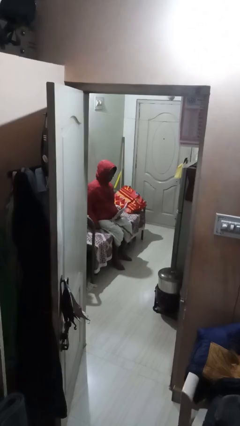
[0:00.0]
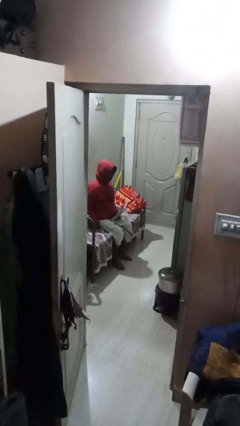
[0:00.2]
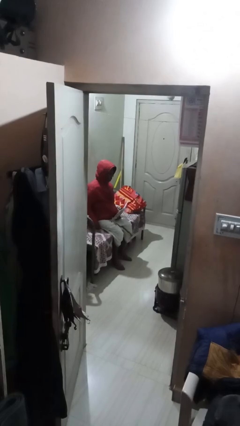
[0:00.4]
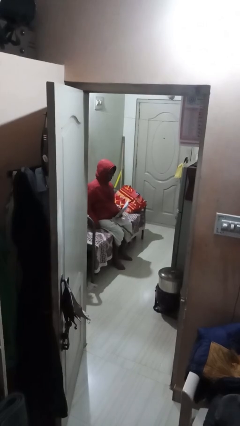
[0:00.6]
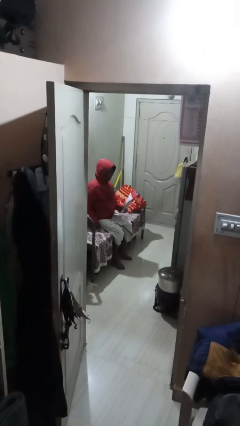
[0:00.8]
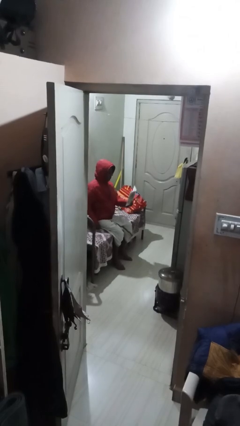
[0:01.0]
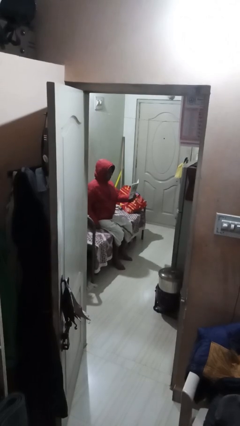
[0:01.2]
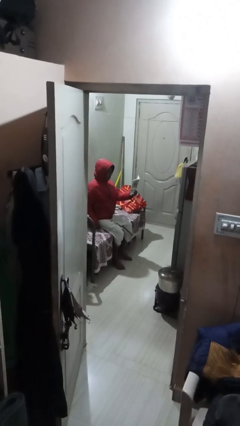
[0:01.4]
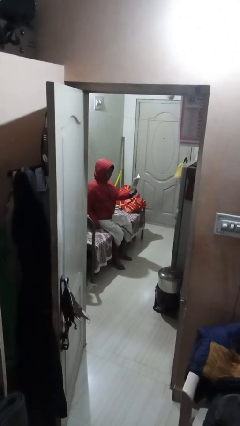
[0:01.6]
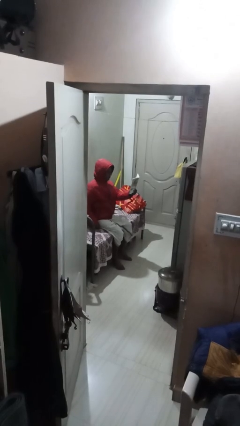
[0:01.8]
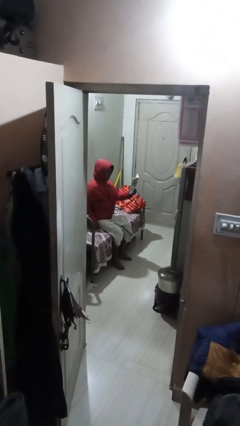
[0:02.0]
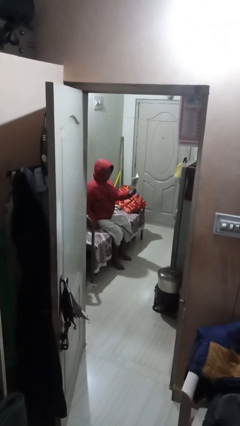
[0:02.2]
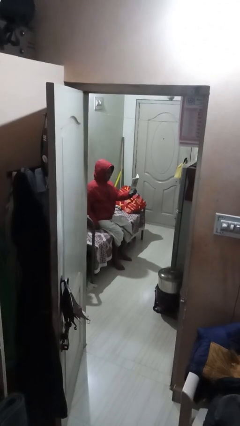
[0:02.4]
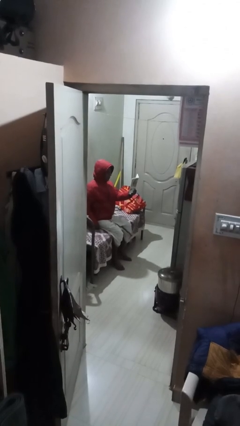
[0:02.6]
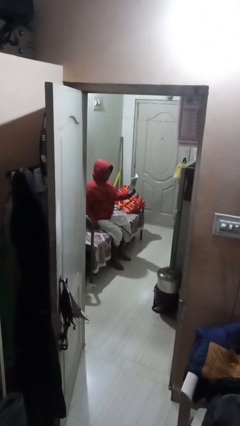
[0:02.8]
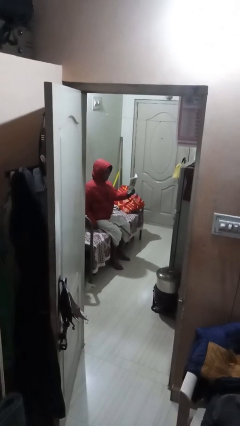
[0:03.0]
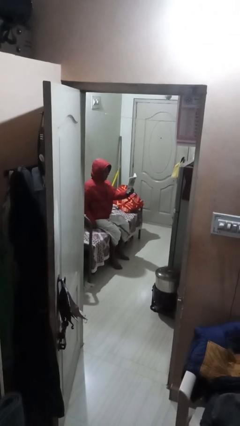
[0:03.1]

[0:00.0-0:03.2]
person reads document

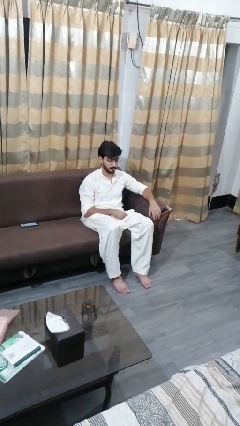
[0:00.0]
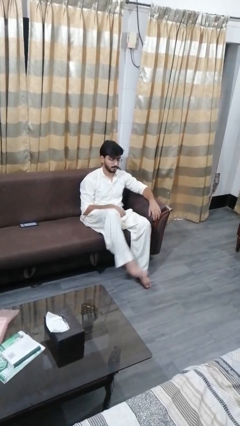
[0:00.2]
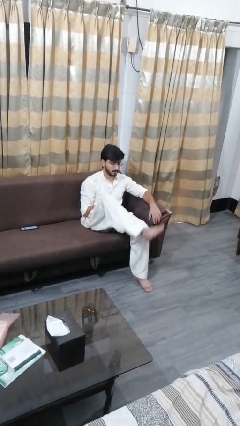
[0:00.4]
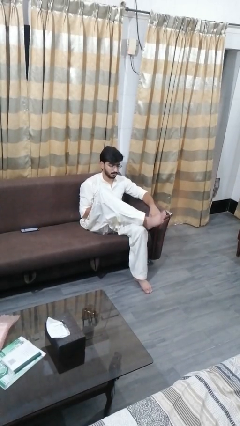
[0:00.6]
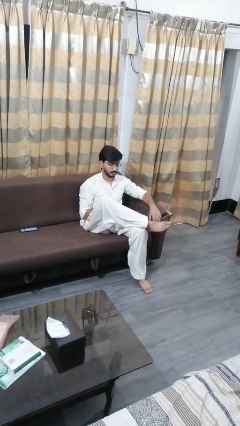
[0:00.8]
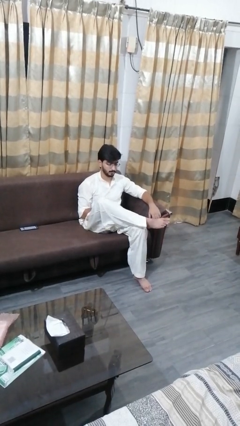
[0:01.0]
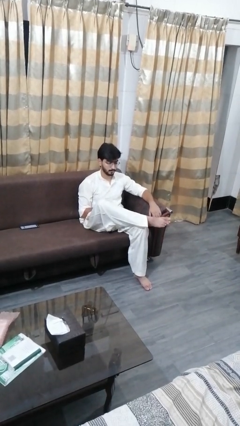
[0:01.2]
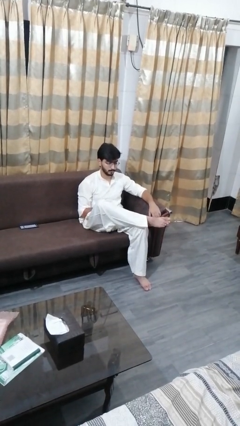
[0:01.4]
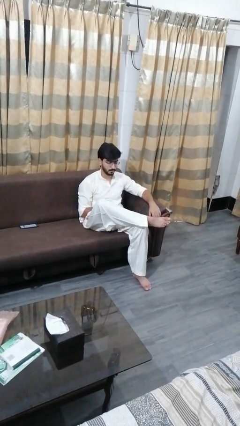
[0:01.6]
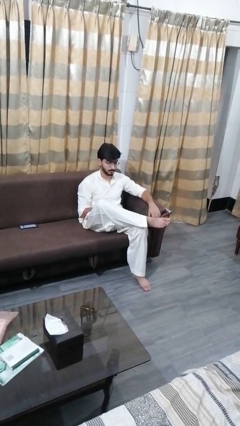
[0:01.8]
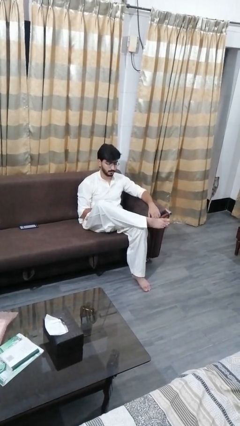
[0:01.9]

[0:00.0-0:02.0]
person crosses legs

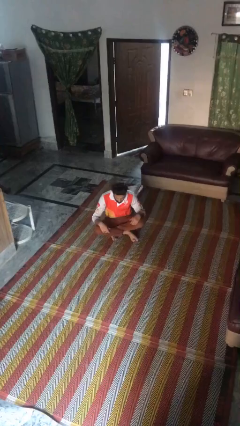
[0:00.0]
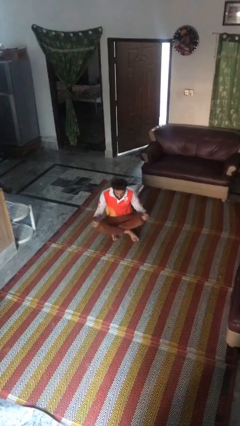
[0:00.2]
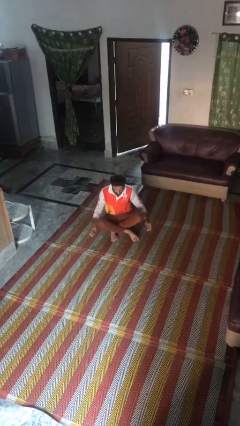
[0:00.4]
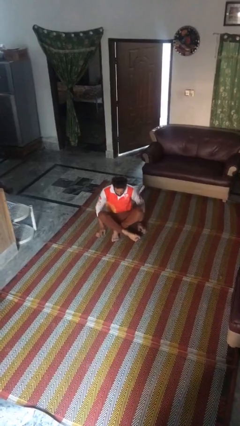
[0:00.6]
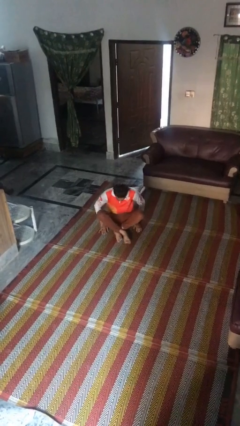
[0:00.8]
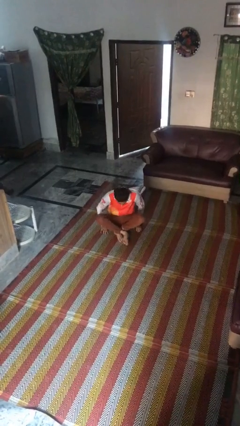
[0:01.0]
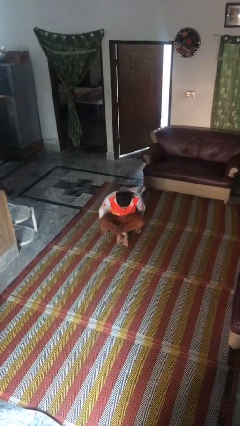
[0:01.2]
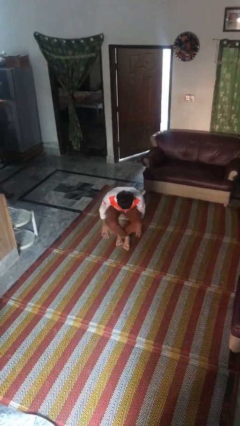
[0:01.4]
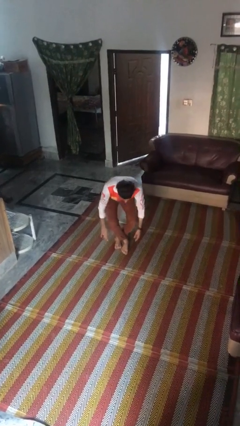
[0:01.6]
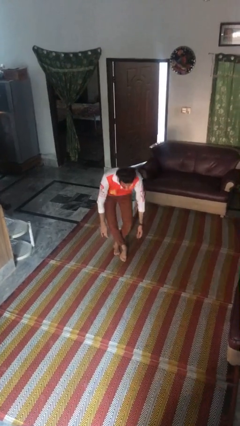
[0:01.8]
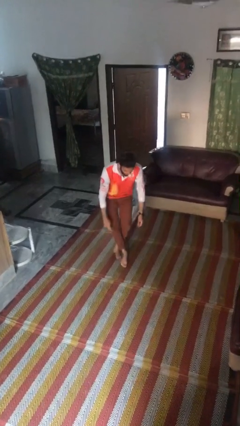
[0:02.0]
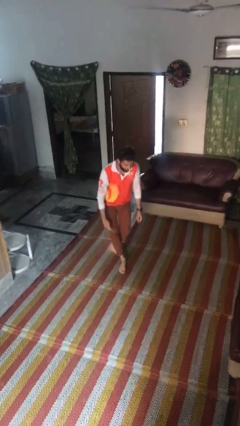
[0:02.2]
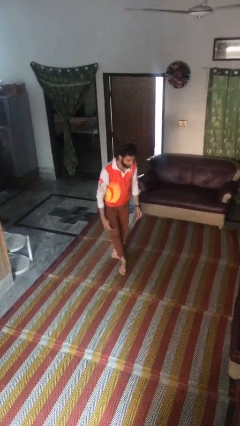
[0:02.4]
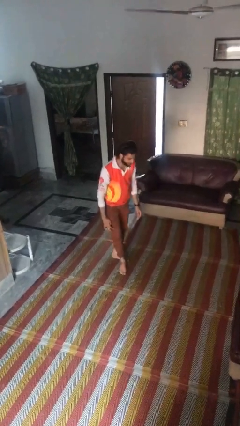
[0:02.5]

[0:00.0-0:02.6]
person stands up from floor

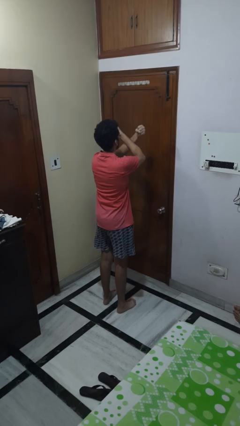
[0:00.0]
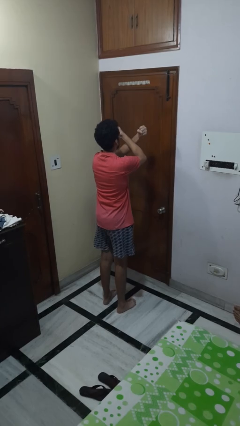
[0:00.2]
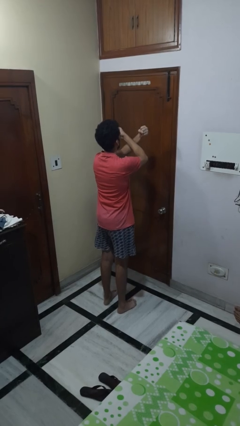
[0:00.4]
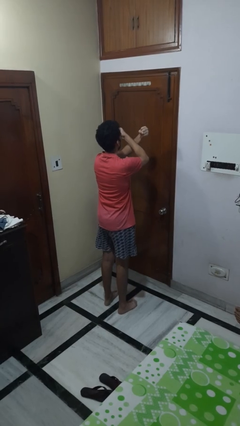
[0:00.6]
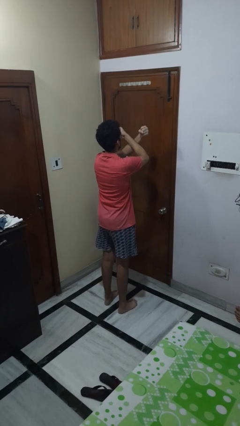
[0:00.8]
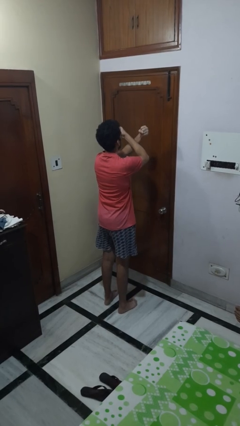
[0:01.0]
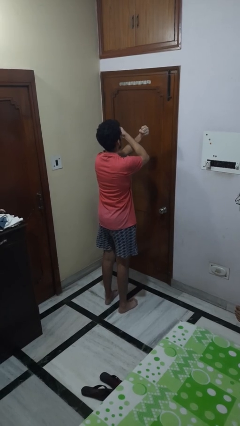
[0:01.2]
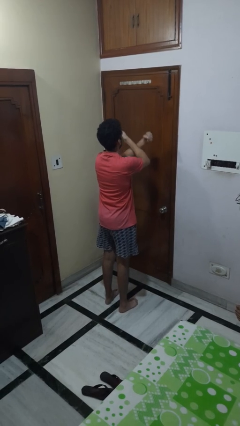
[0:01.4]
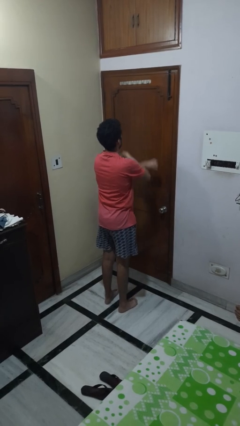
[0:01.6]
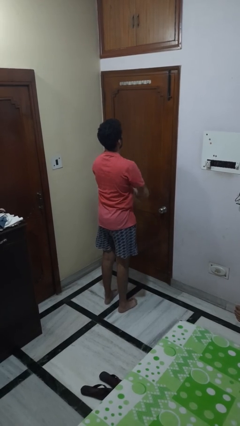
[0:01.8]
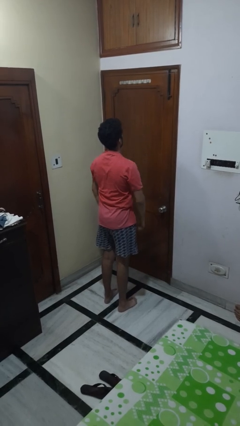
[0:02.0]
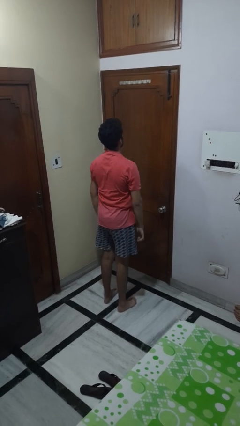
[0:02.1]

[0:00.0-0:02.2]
person gestures arms x

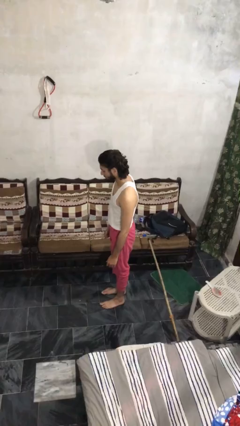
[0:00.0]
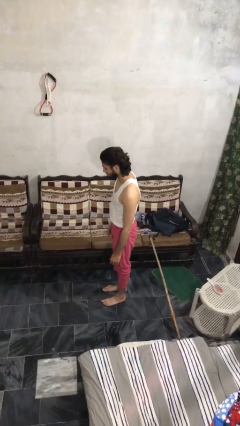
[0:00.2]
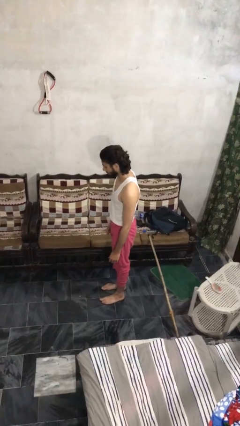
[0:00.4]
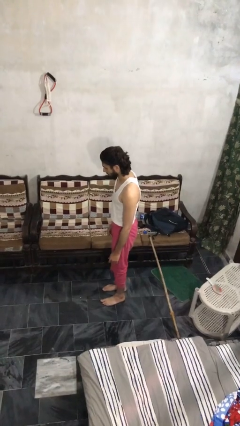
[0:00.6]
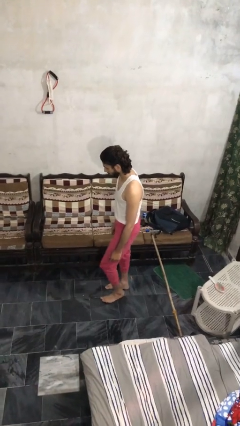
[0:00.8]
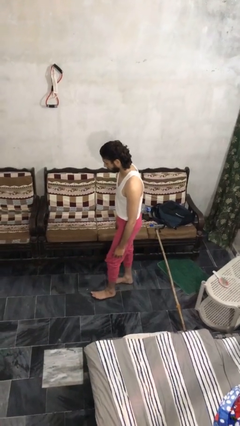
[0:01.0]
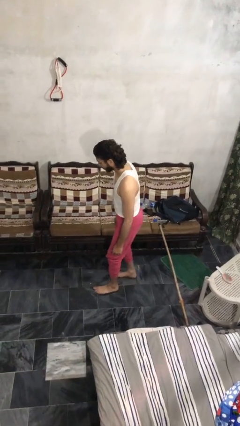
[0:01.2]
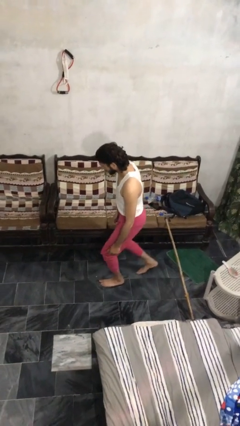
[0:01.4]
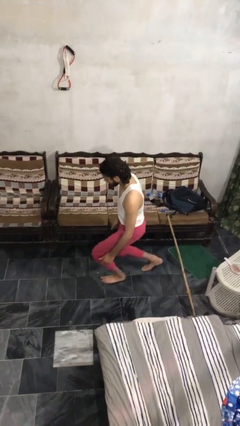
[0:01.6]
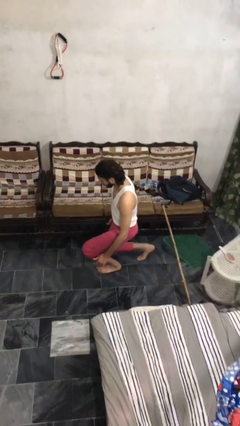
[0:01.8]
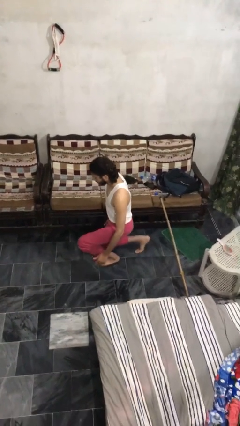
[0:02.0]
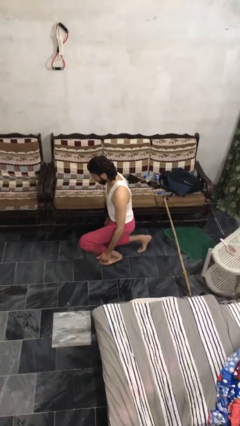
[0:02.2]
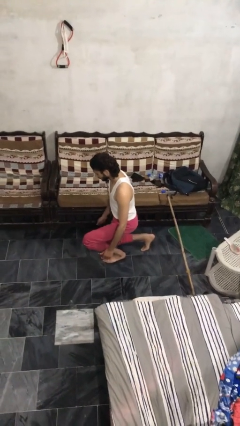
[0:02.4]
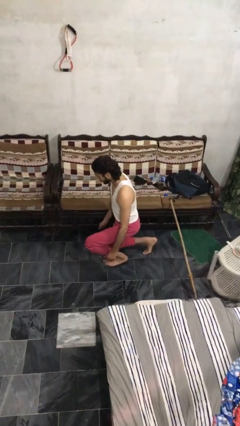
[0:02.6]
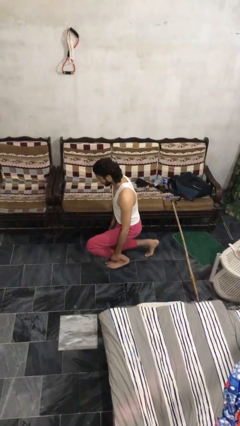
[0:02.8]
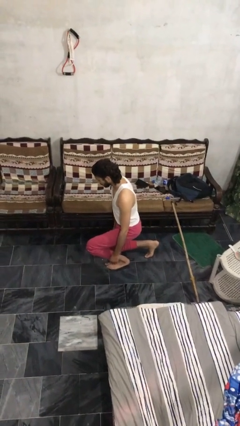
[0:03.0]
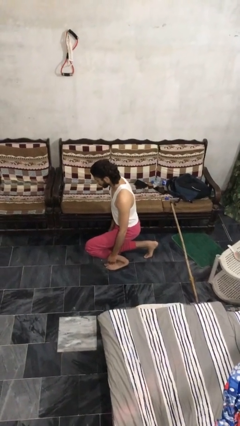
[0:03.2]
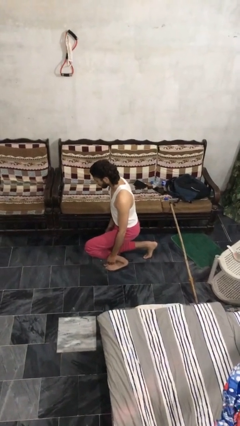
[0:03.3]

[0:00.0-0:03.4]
person kneels

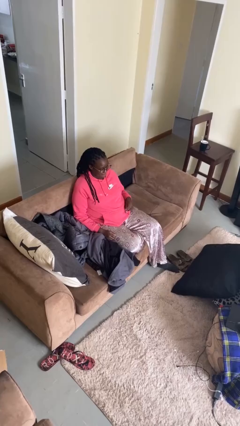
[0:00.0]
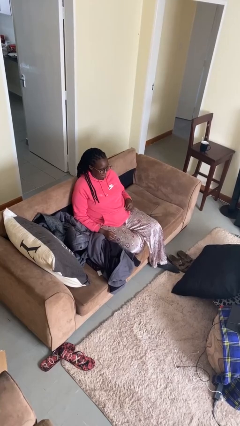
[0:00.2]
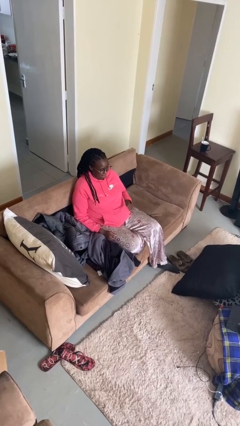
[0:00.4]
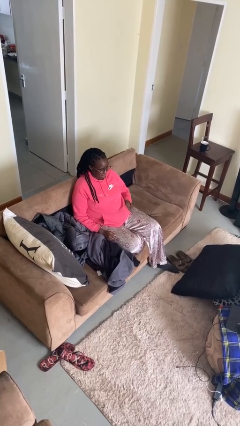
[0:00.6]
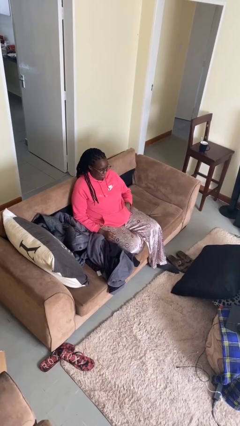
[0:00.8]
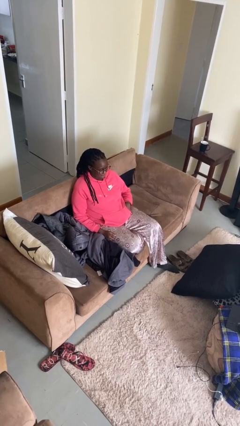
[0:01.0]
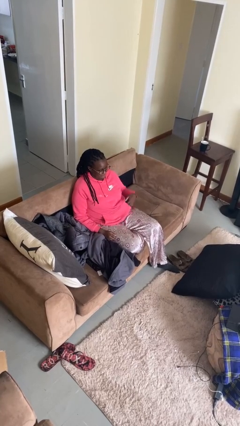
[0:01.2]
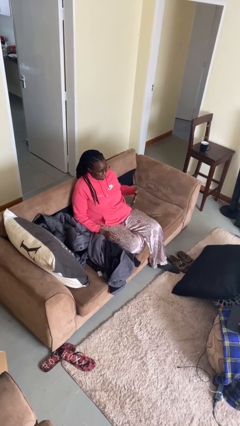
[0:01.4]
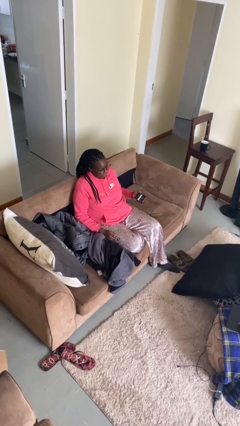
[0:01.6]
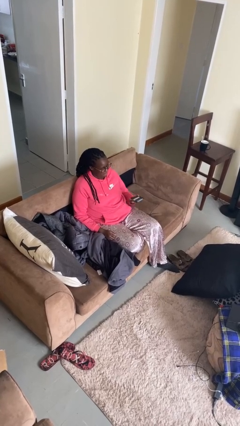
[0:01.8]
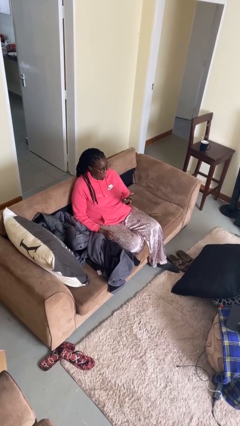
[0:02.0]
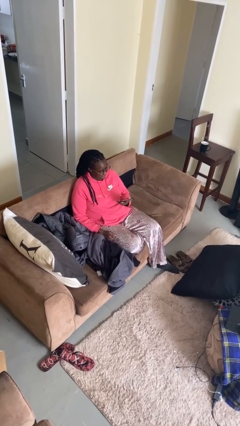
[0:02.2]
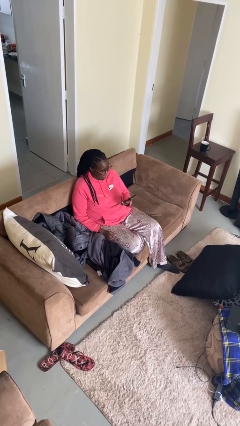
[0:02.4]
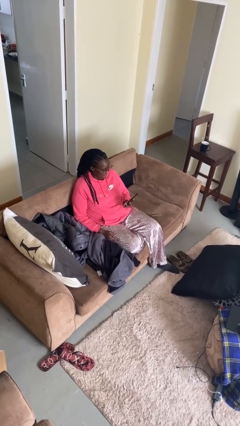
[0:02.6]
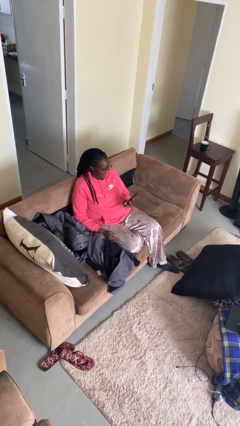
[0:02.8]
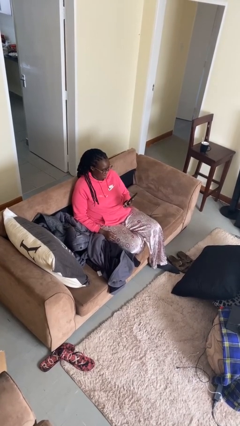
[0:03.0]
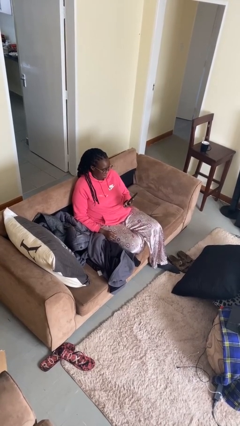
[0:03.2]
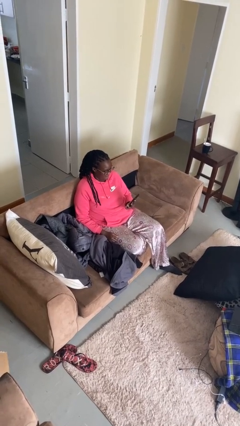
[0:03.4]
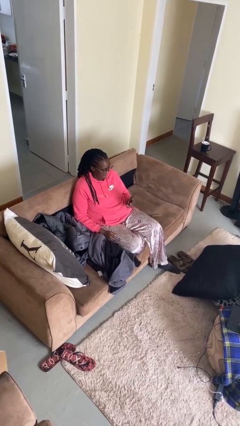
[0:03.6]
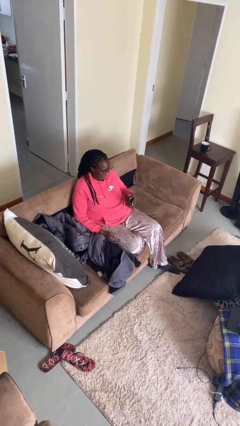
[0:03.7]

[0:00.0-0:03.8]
person takes phone from pocket

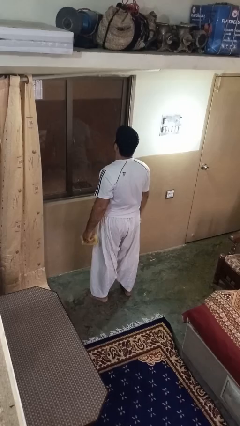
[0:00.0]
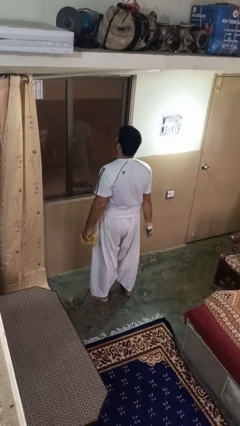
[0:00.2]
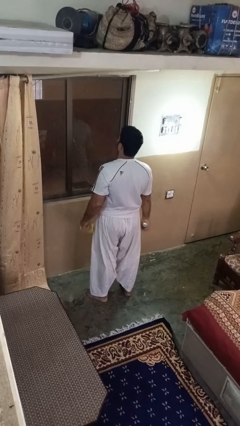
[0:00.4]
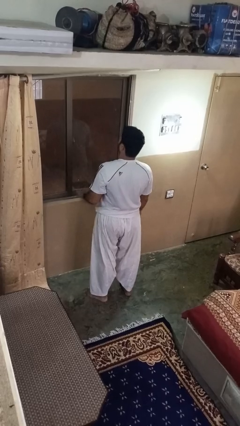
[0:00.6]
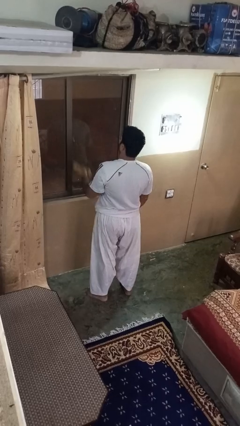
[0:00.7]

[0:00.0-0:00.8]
person sprays from bottle
